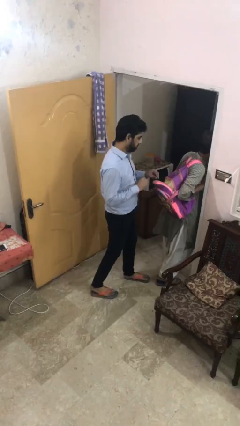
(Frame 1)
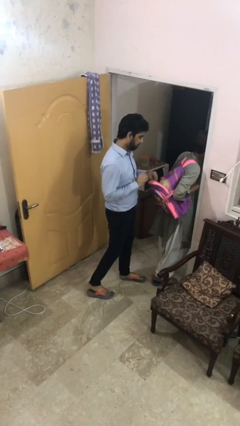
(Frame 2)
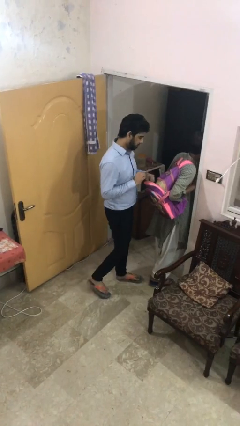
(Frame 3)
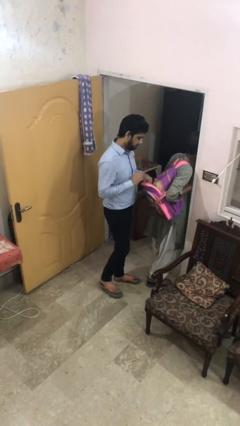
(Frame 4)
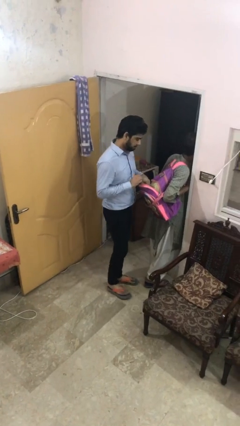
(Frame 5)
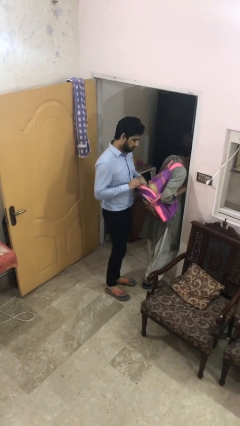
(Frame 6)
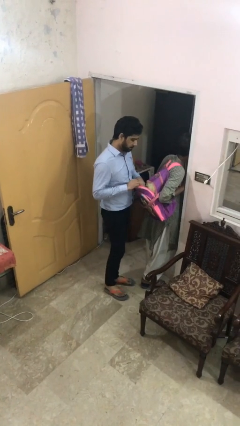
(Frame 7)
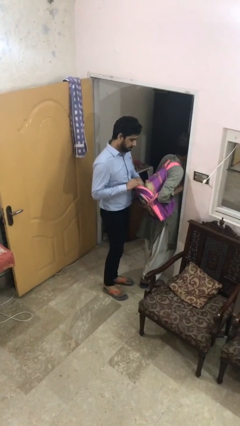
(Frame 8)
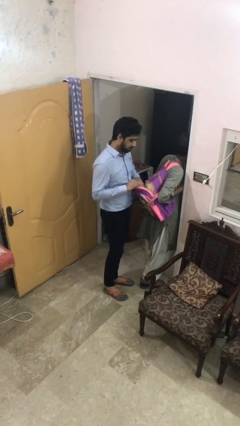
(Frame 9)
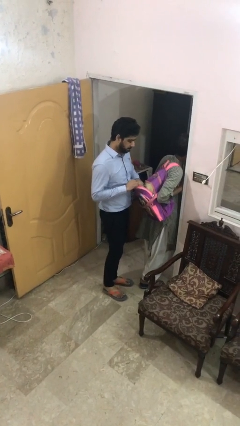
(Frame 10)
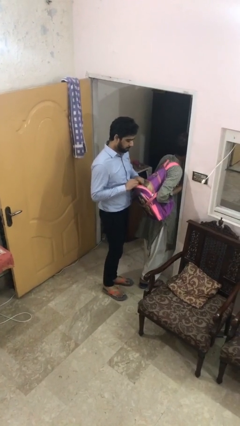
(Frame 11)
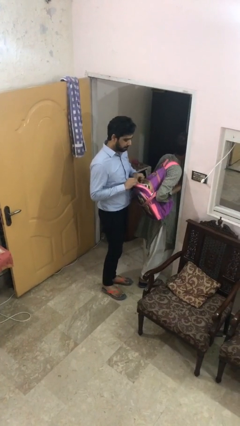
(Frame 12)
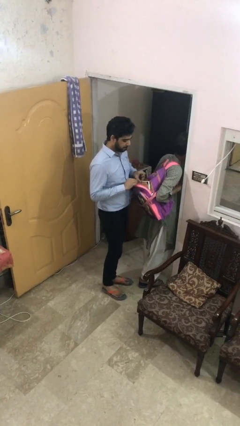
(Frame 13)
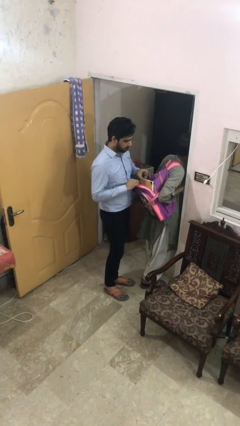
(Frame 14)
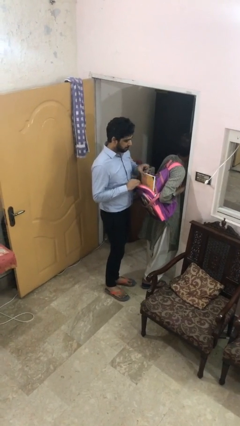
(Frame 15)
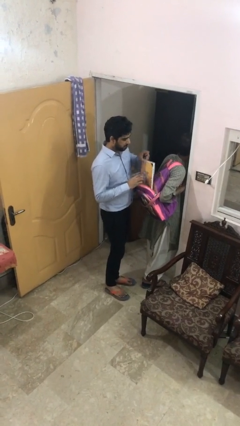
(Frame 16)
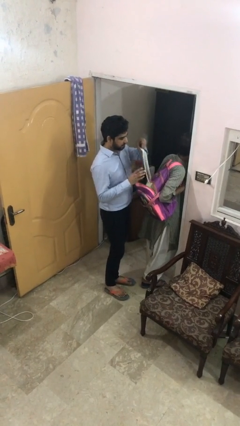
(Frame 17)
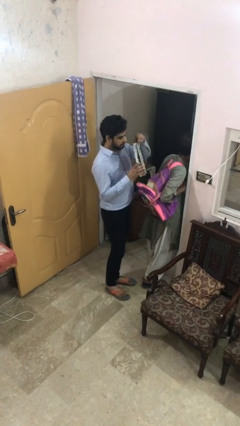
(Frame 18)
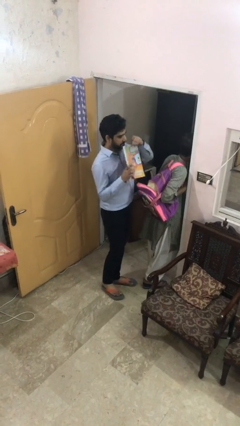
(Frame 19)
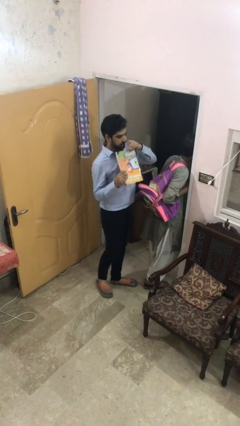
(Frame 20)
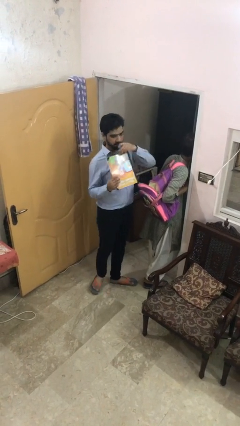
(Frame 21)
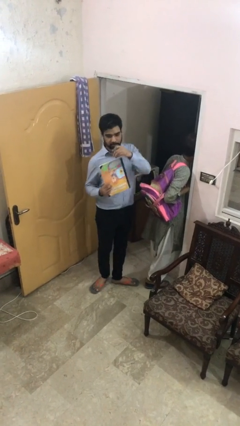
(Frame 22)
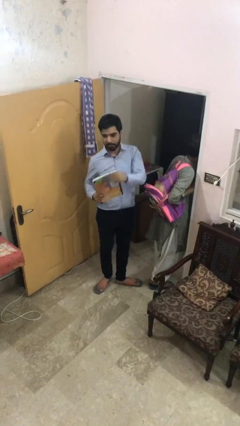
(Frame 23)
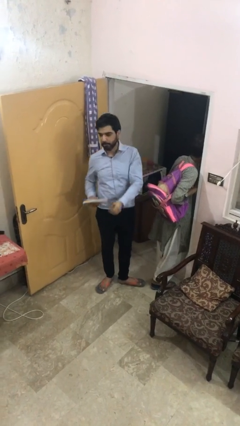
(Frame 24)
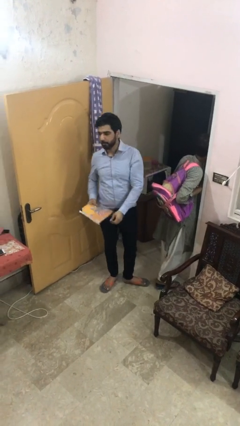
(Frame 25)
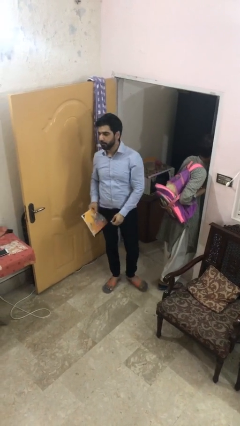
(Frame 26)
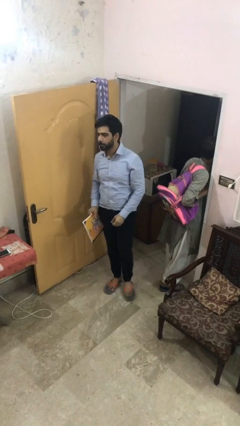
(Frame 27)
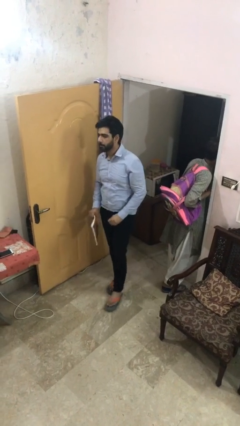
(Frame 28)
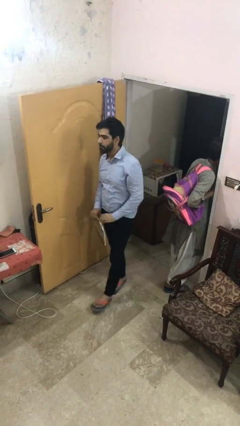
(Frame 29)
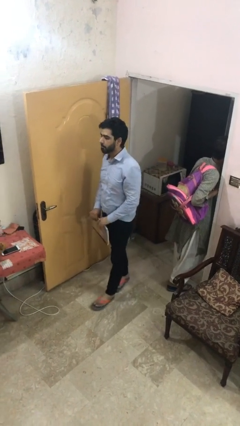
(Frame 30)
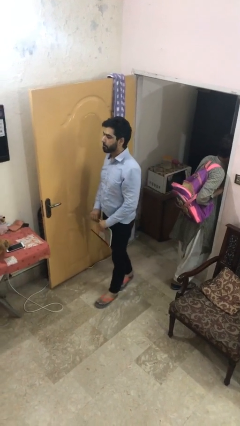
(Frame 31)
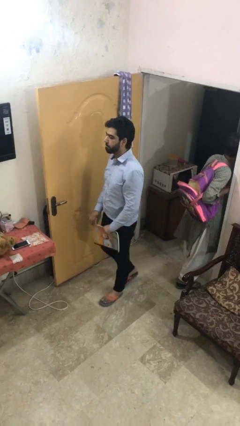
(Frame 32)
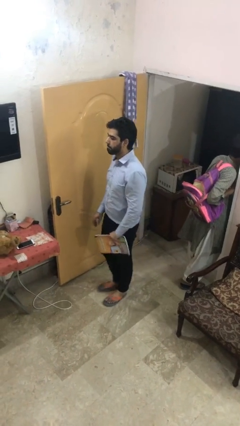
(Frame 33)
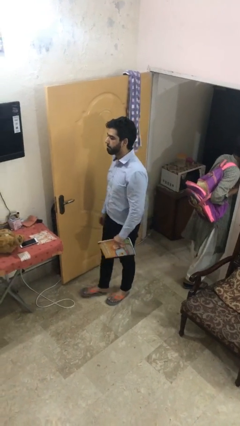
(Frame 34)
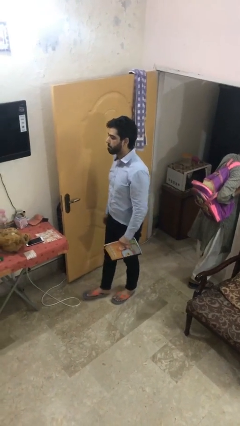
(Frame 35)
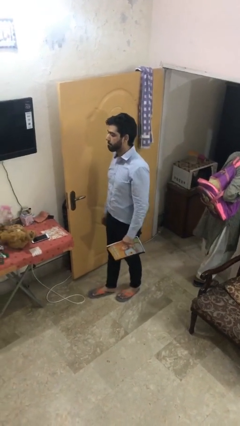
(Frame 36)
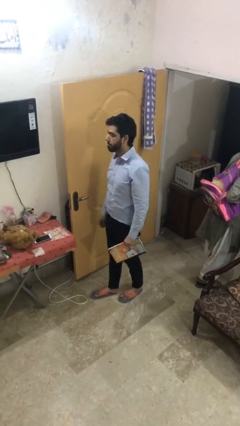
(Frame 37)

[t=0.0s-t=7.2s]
person steals object from person

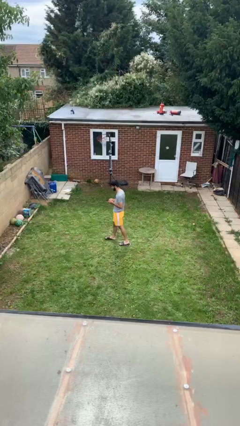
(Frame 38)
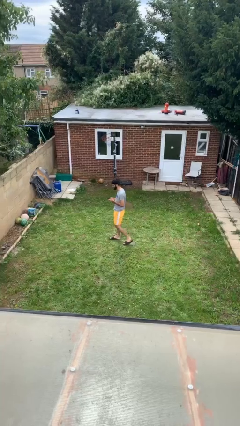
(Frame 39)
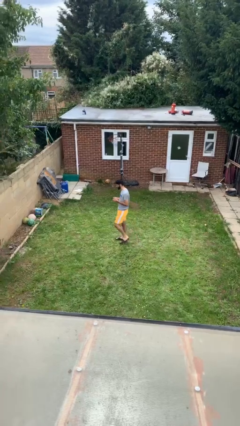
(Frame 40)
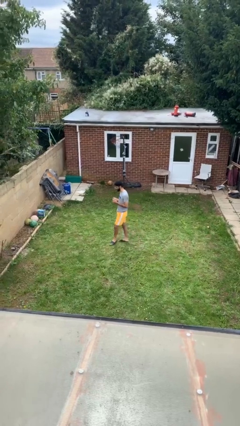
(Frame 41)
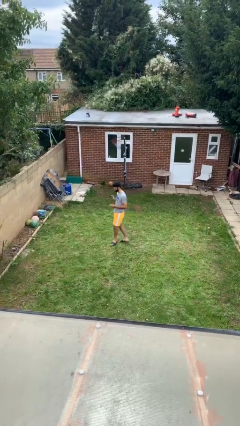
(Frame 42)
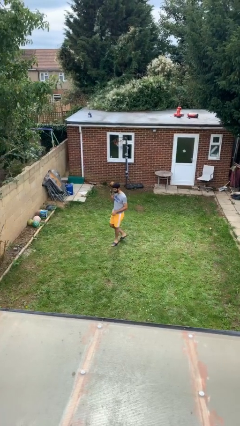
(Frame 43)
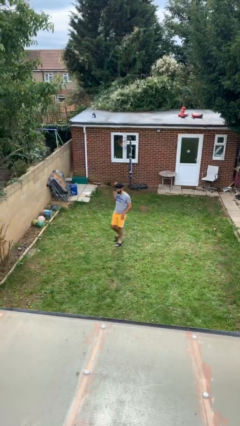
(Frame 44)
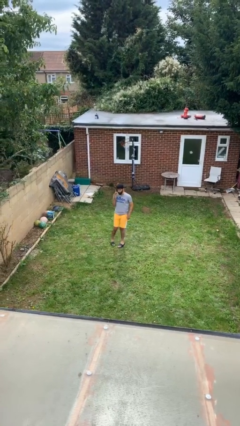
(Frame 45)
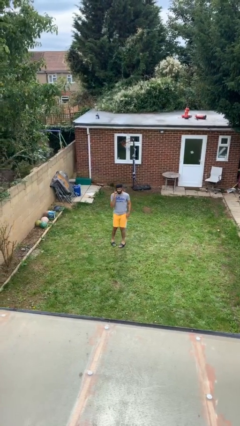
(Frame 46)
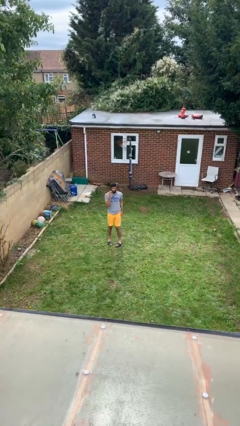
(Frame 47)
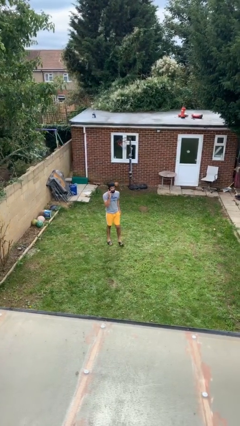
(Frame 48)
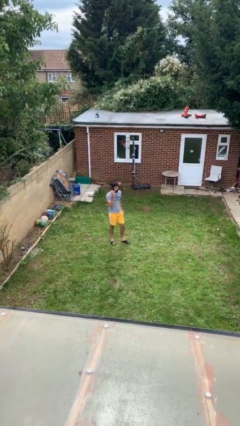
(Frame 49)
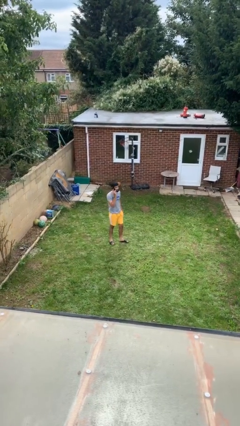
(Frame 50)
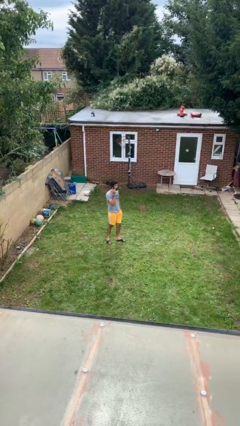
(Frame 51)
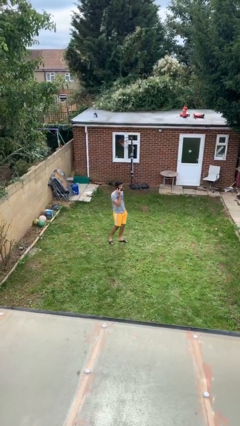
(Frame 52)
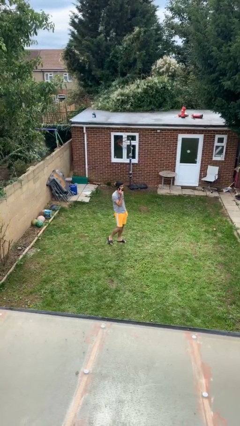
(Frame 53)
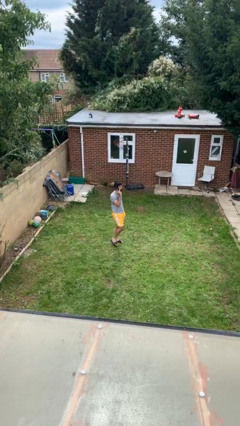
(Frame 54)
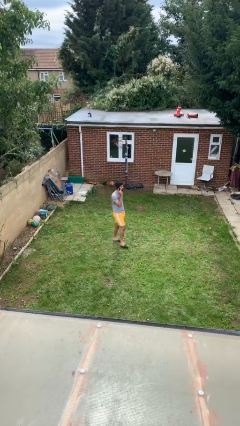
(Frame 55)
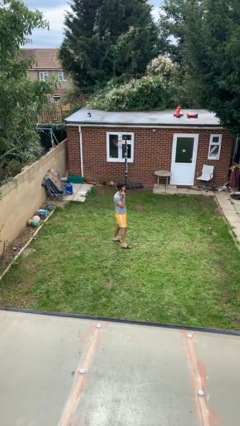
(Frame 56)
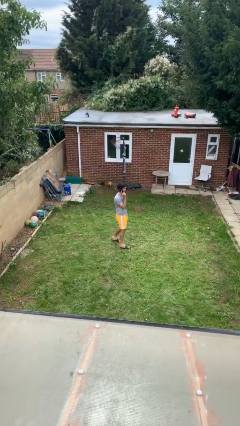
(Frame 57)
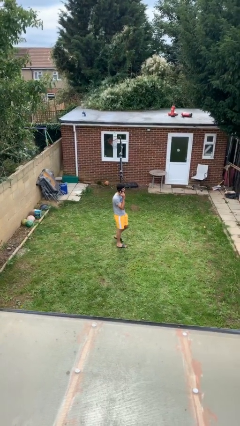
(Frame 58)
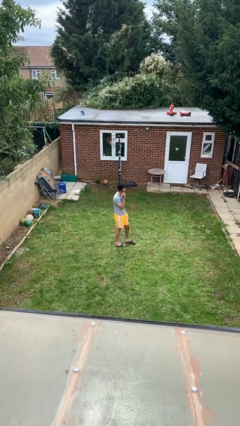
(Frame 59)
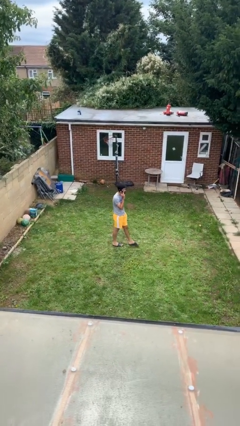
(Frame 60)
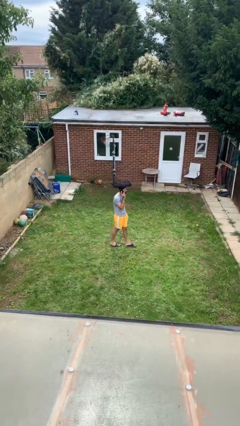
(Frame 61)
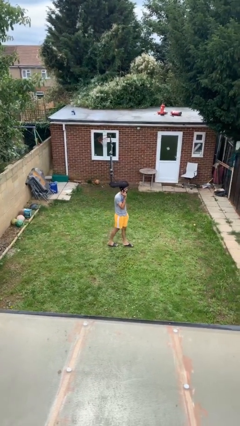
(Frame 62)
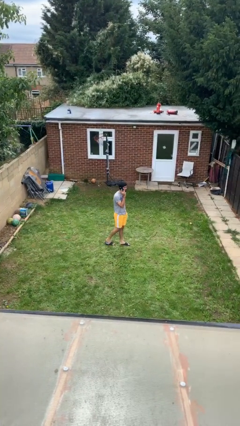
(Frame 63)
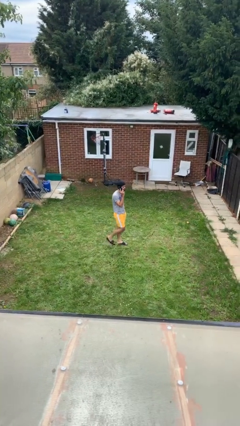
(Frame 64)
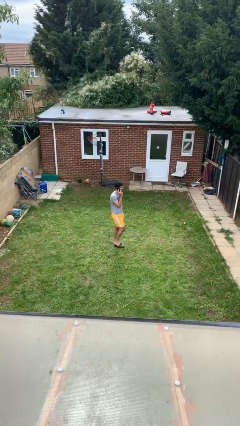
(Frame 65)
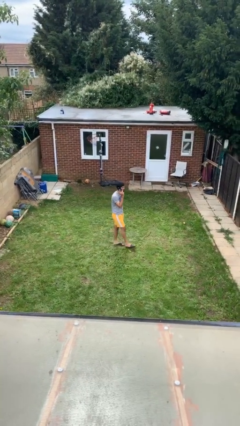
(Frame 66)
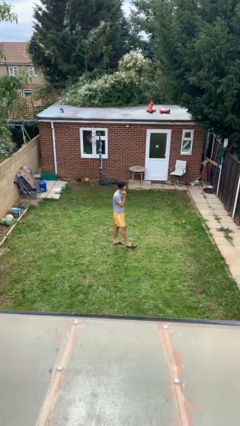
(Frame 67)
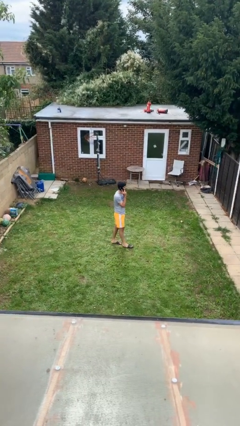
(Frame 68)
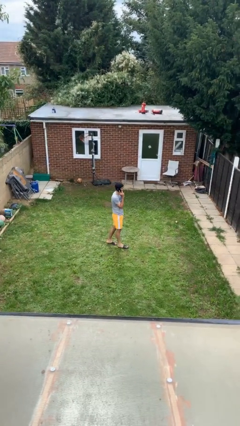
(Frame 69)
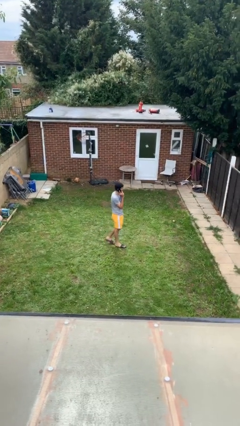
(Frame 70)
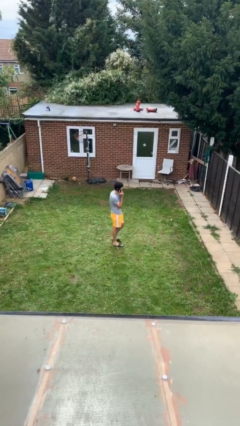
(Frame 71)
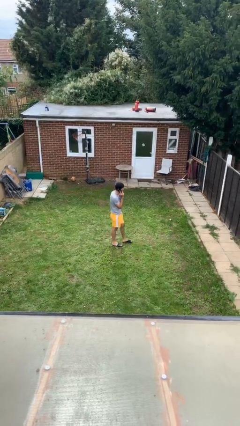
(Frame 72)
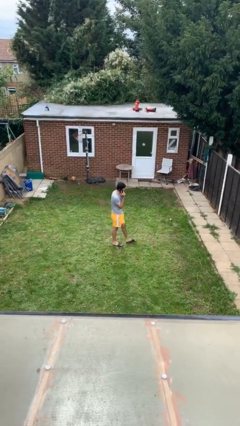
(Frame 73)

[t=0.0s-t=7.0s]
person talks on phone

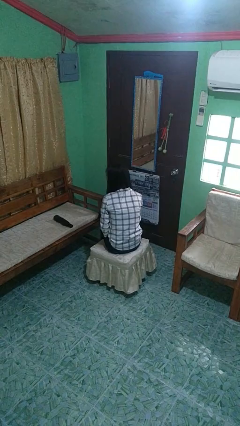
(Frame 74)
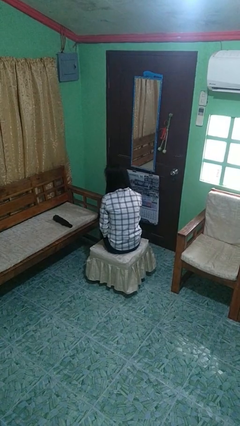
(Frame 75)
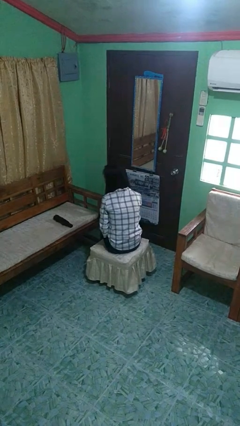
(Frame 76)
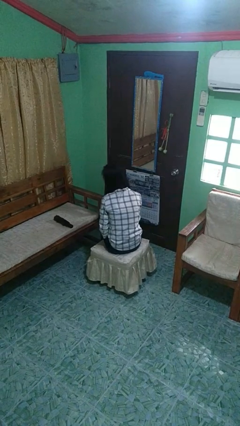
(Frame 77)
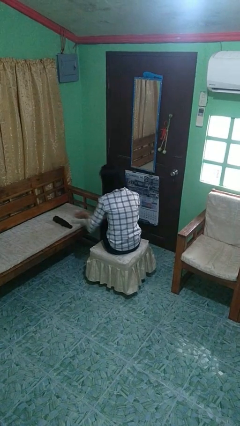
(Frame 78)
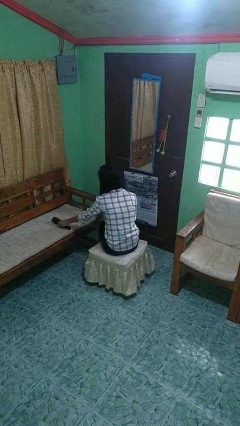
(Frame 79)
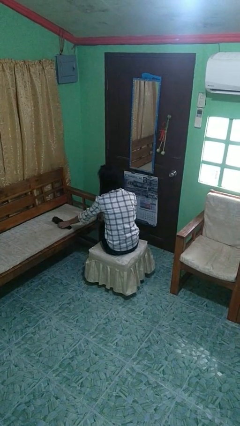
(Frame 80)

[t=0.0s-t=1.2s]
person picks up object from couch

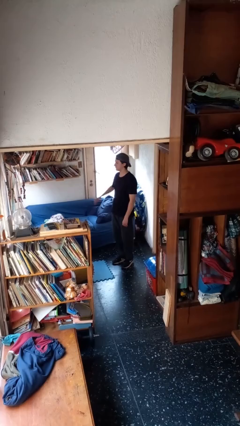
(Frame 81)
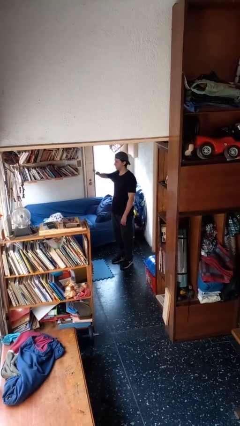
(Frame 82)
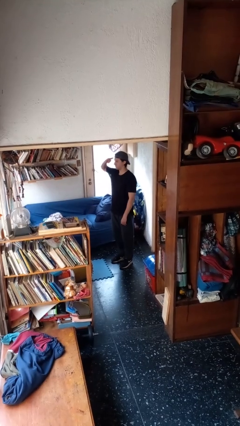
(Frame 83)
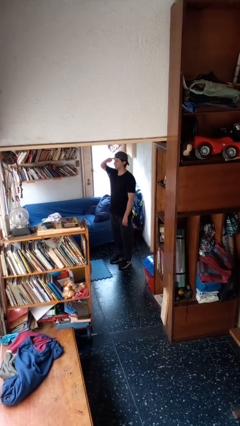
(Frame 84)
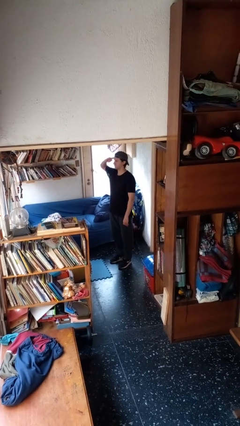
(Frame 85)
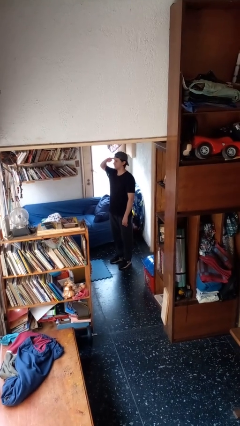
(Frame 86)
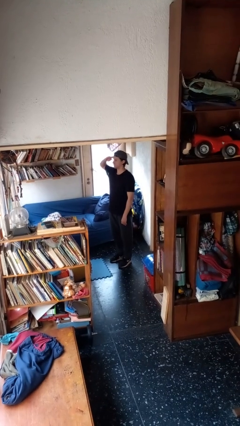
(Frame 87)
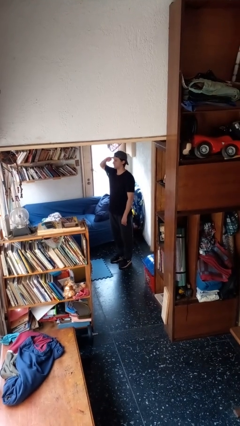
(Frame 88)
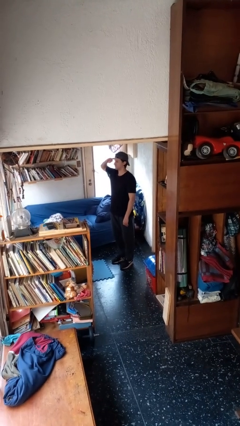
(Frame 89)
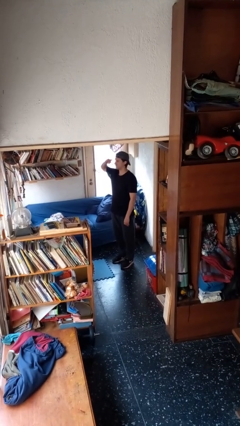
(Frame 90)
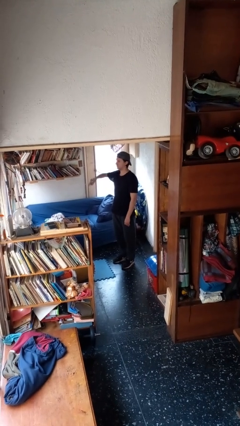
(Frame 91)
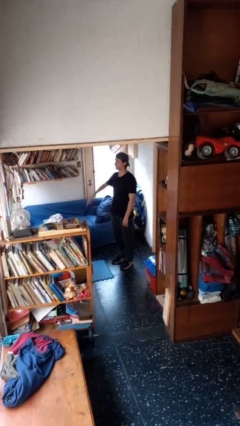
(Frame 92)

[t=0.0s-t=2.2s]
person salutes

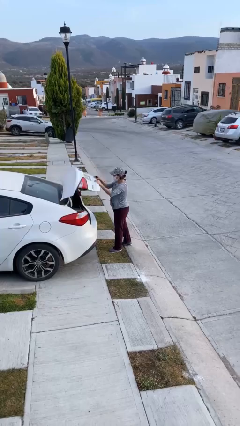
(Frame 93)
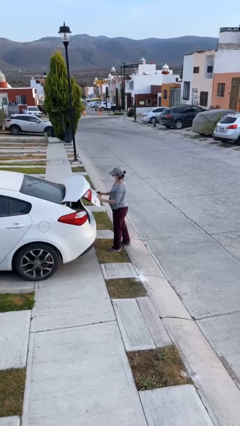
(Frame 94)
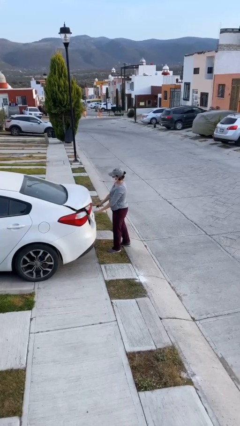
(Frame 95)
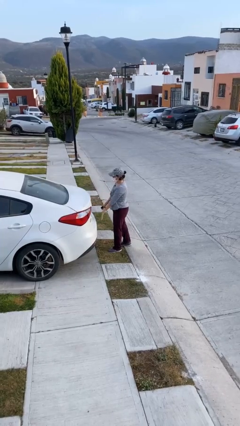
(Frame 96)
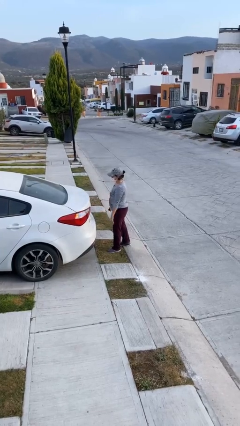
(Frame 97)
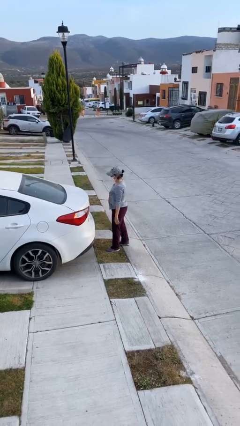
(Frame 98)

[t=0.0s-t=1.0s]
person closes car trunk
